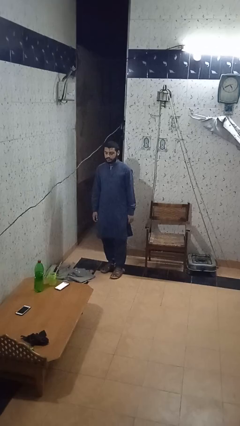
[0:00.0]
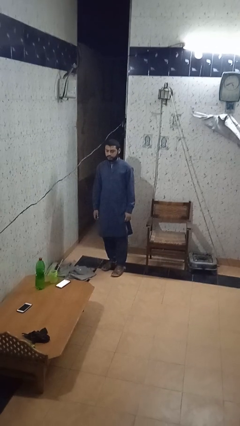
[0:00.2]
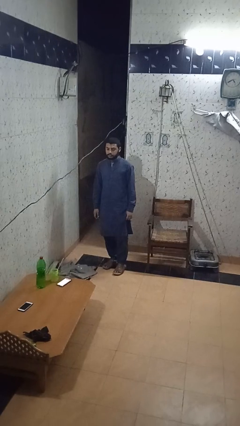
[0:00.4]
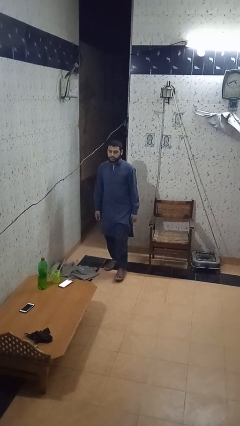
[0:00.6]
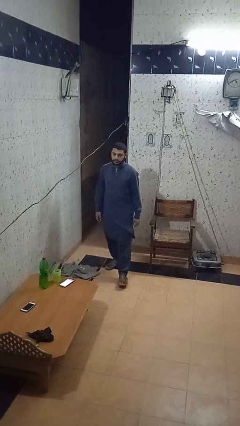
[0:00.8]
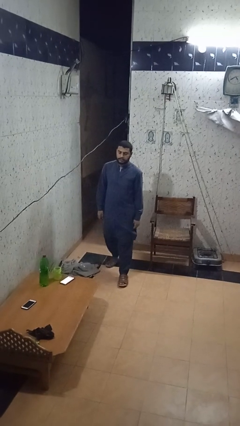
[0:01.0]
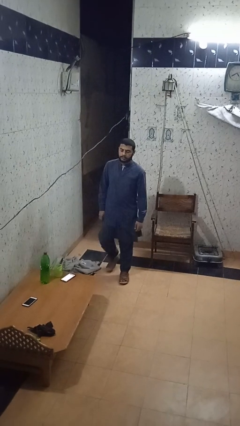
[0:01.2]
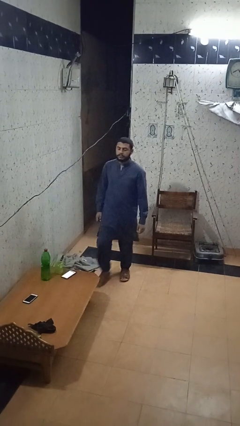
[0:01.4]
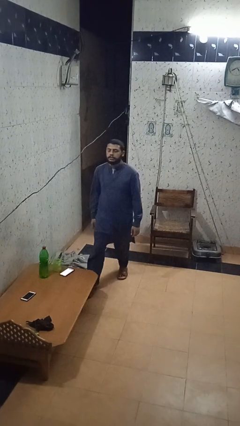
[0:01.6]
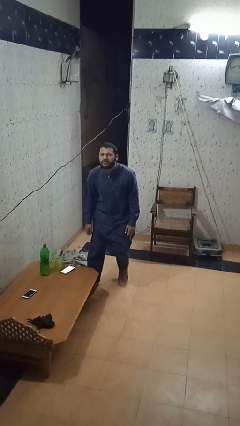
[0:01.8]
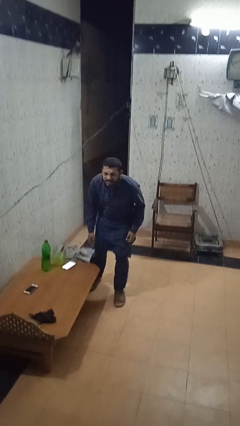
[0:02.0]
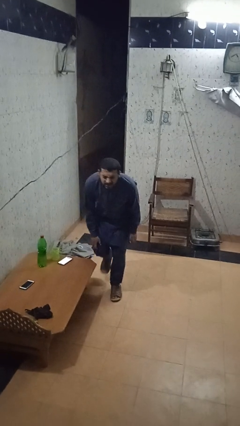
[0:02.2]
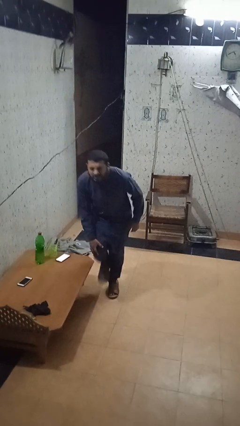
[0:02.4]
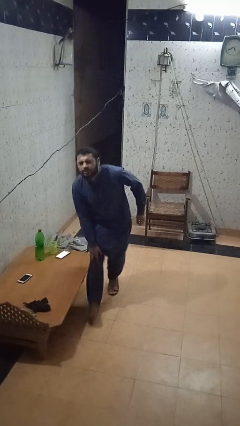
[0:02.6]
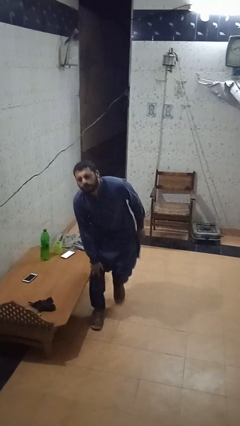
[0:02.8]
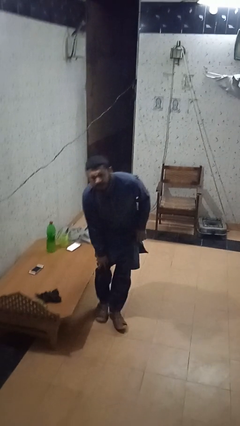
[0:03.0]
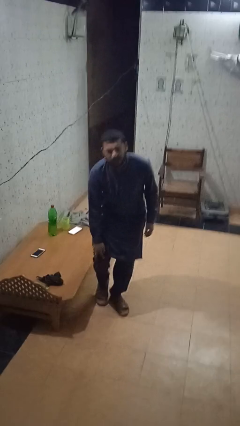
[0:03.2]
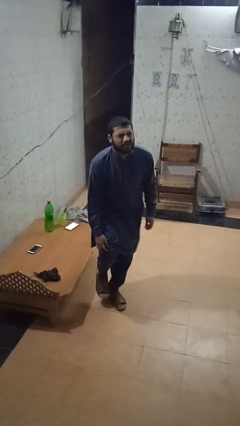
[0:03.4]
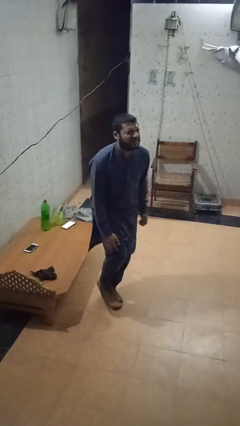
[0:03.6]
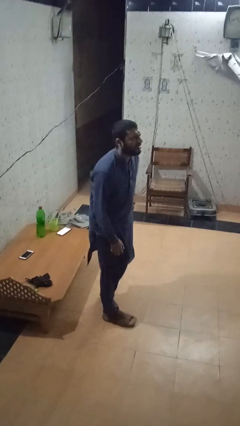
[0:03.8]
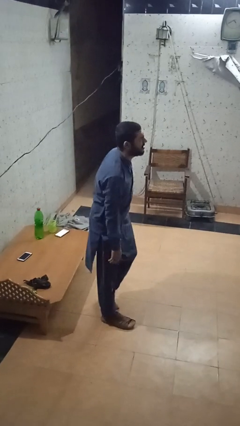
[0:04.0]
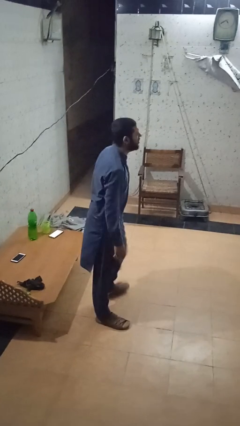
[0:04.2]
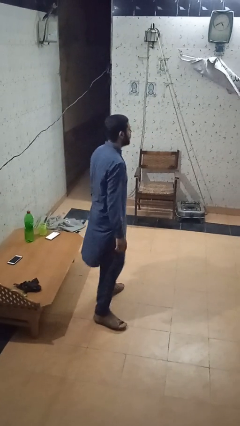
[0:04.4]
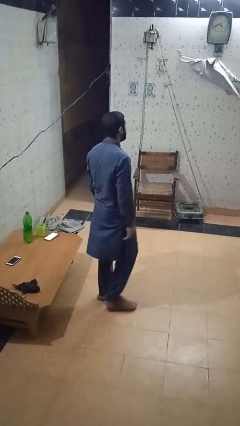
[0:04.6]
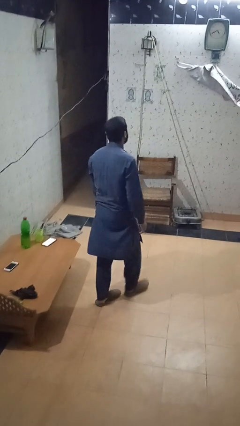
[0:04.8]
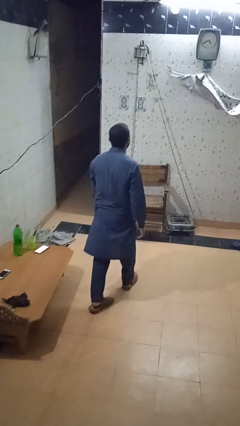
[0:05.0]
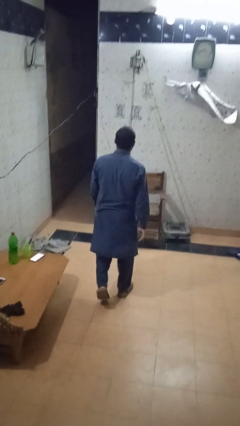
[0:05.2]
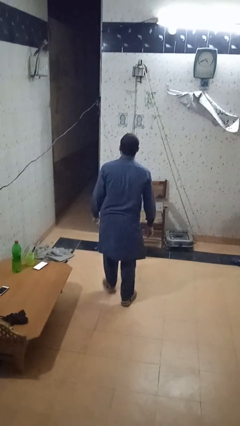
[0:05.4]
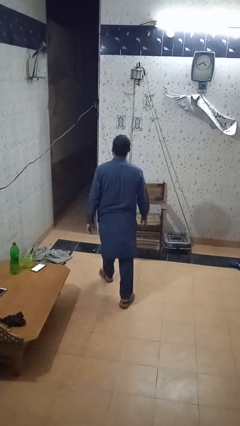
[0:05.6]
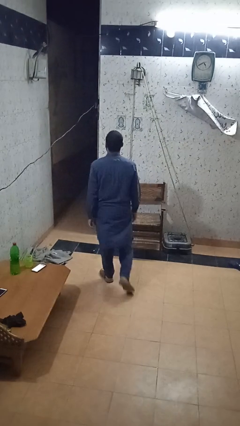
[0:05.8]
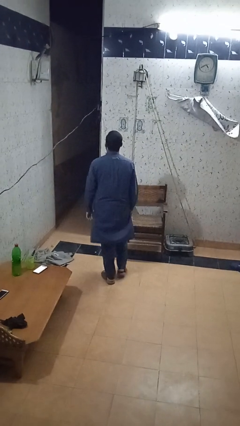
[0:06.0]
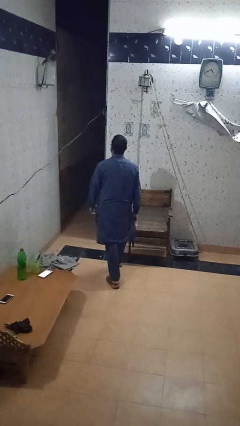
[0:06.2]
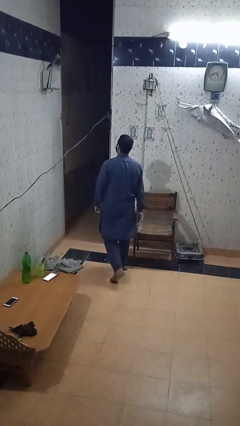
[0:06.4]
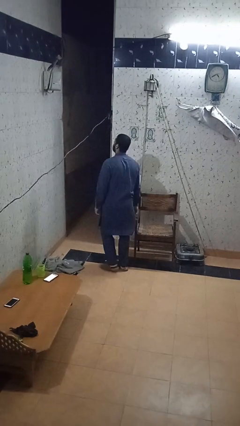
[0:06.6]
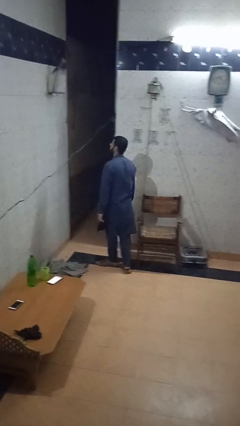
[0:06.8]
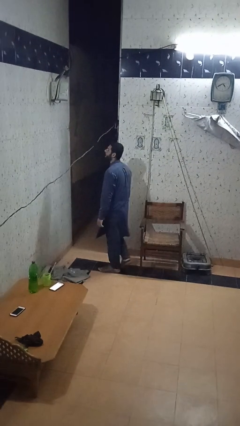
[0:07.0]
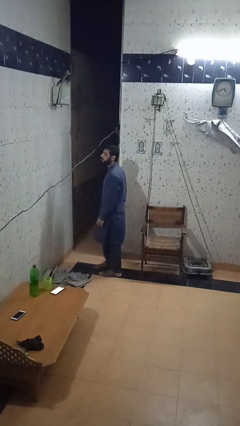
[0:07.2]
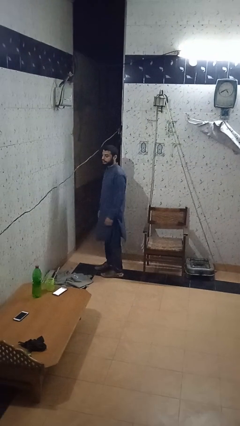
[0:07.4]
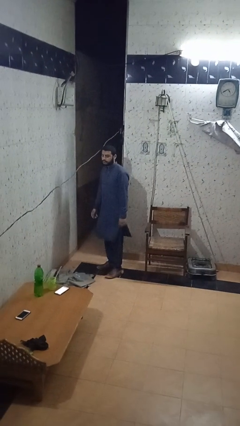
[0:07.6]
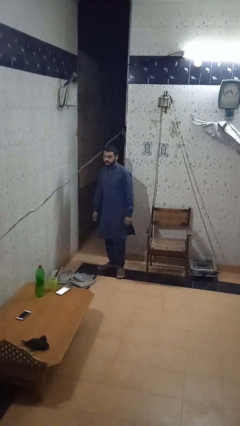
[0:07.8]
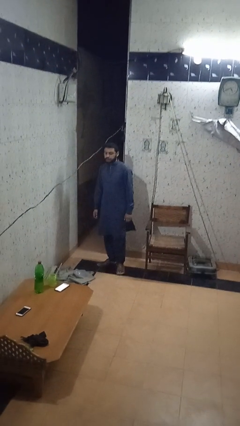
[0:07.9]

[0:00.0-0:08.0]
person bumps into table

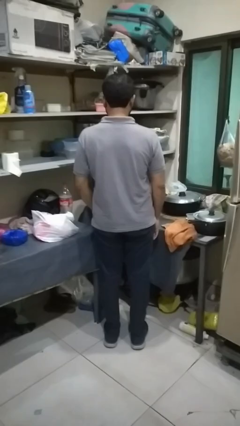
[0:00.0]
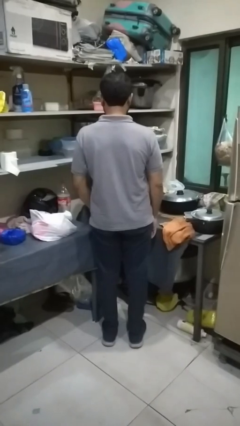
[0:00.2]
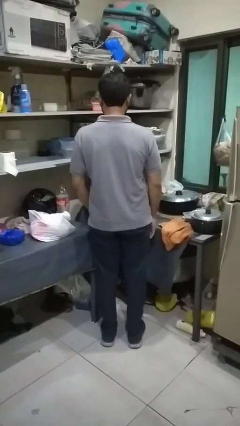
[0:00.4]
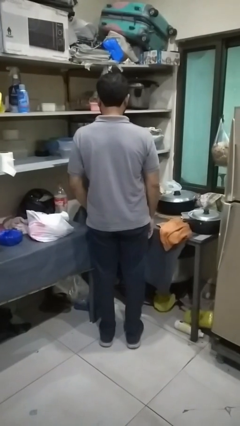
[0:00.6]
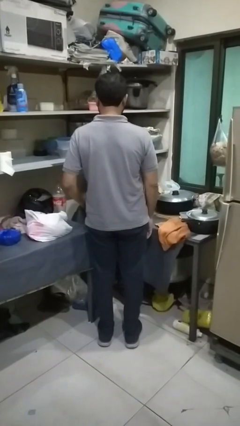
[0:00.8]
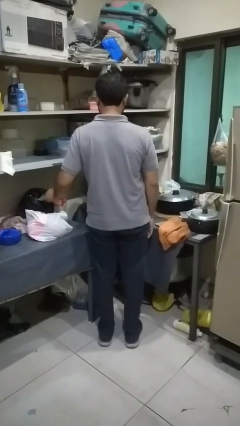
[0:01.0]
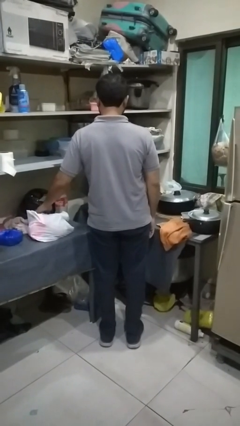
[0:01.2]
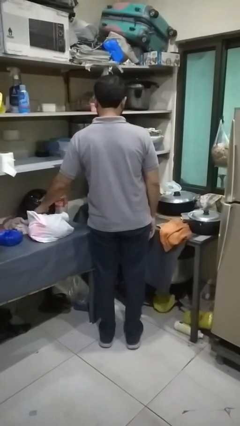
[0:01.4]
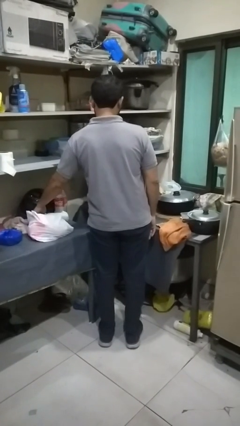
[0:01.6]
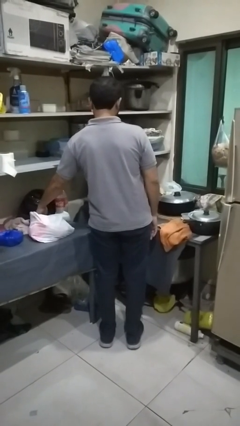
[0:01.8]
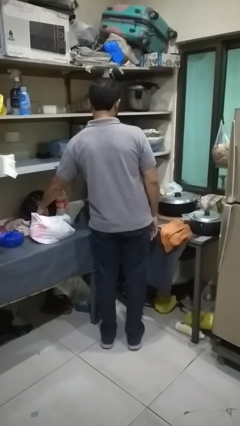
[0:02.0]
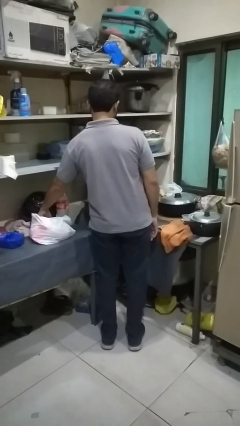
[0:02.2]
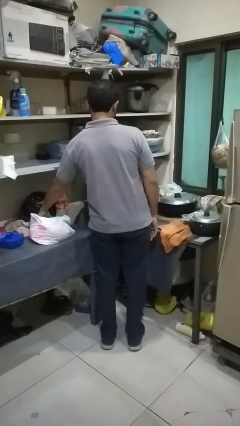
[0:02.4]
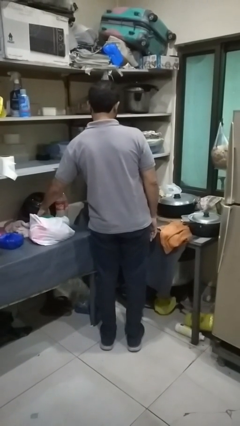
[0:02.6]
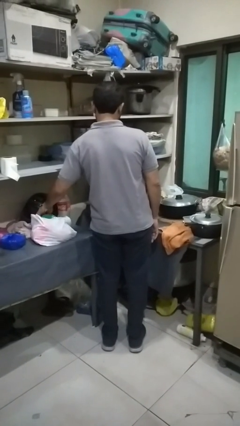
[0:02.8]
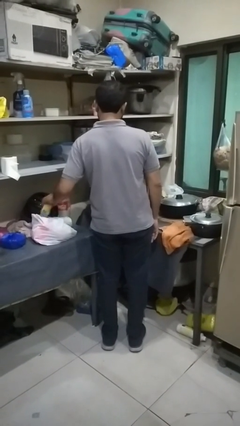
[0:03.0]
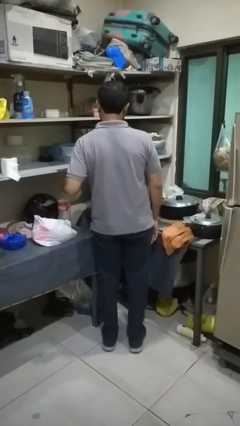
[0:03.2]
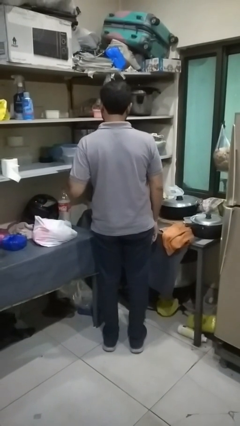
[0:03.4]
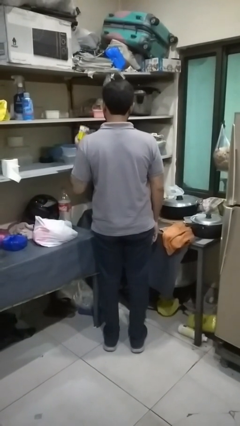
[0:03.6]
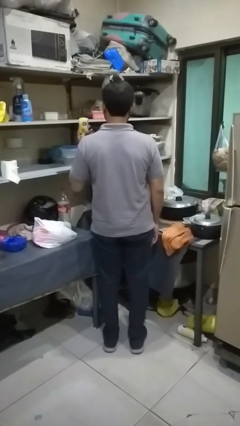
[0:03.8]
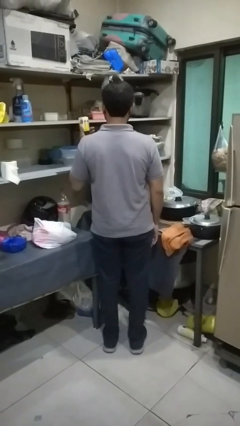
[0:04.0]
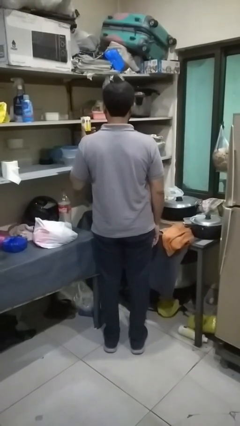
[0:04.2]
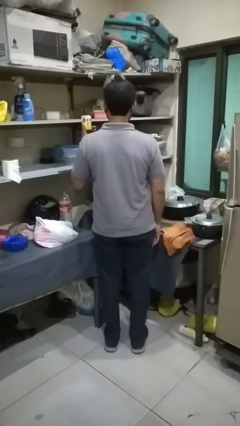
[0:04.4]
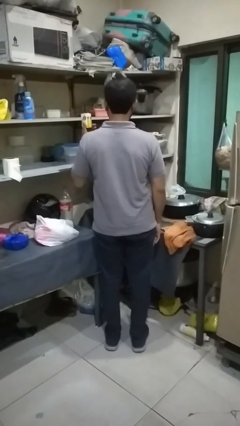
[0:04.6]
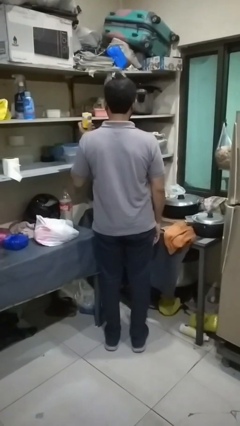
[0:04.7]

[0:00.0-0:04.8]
person takes object from bag

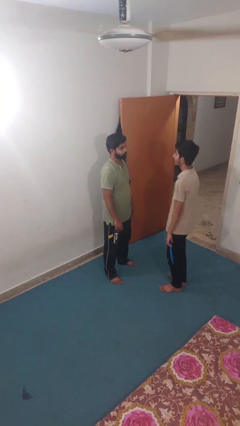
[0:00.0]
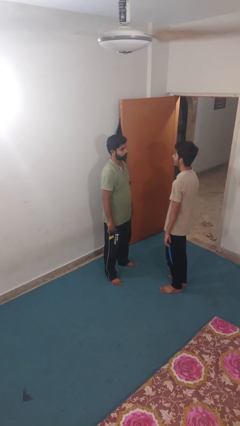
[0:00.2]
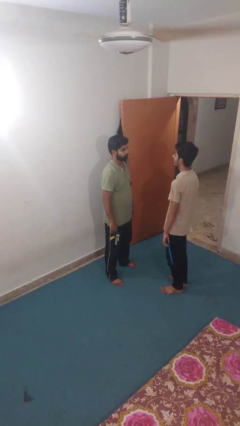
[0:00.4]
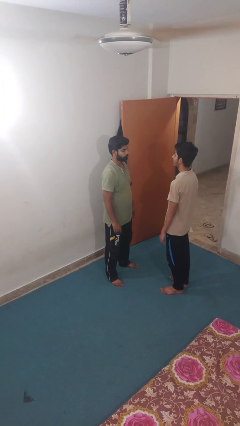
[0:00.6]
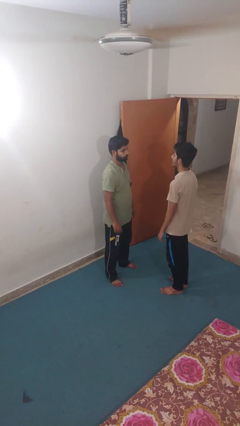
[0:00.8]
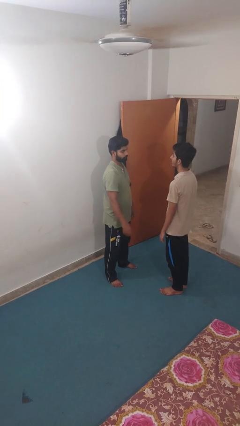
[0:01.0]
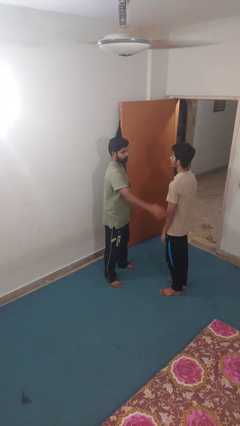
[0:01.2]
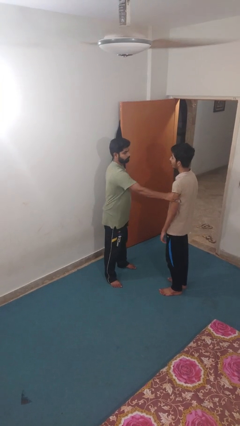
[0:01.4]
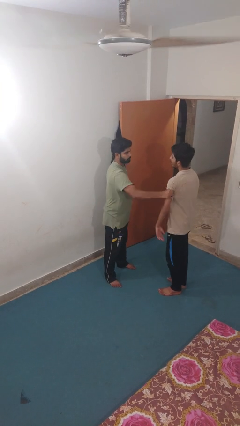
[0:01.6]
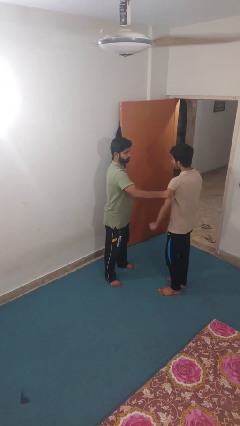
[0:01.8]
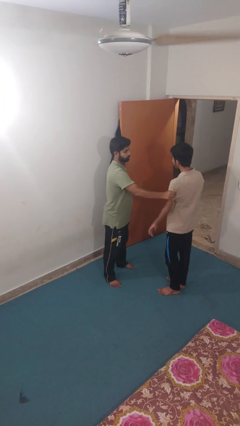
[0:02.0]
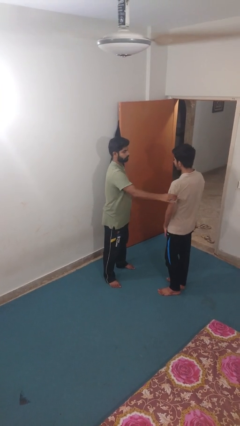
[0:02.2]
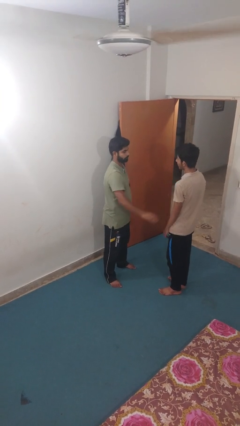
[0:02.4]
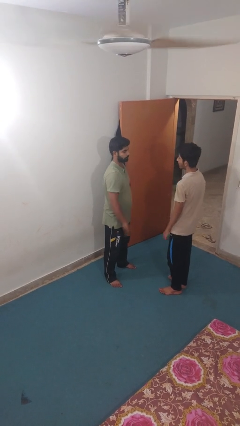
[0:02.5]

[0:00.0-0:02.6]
person grabs person by bicep

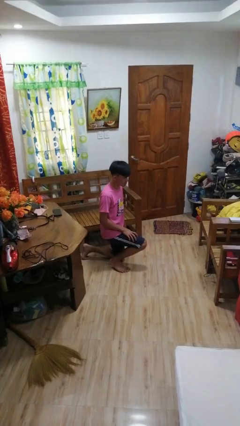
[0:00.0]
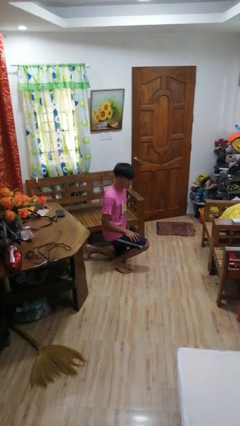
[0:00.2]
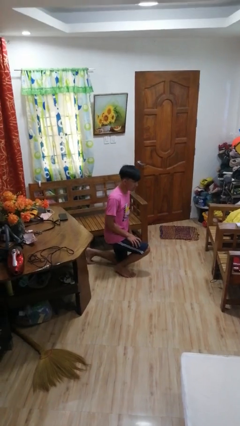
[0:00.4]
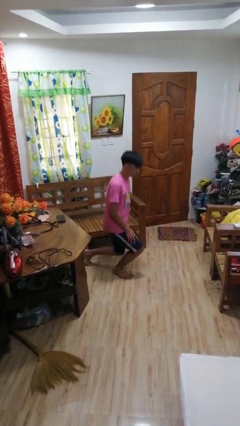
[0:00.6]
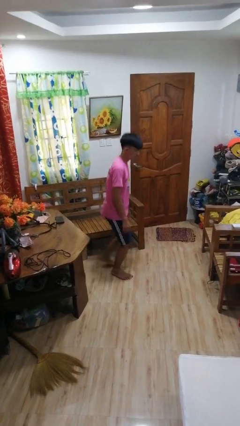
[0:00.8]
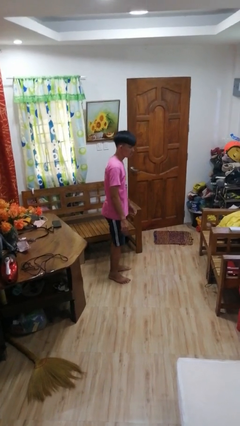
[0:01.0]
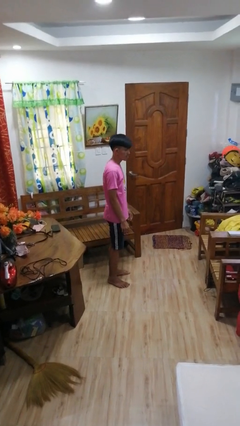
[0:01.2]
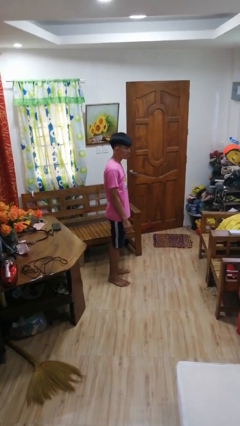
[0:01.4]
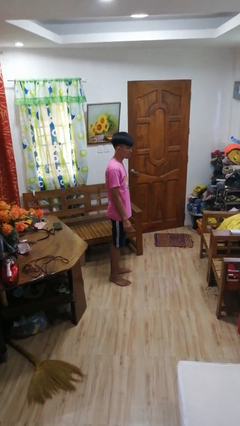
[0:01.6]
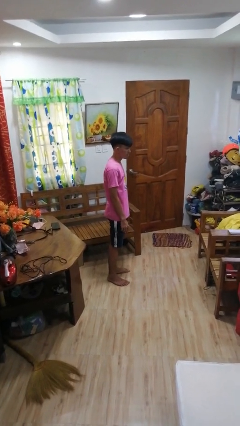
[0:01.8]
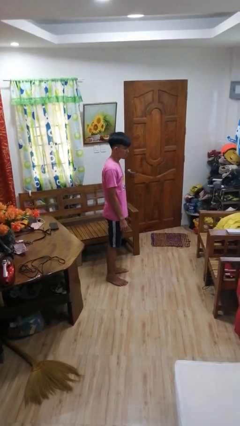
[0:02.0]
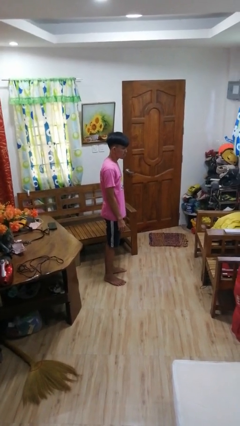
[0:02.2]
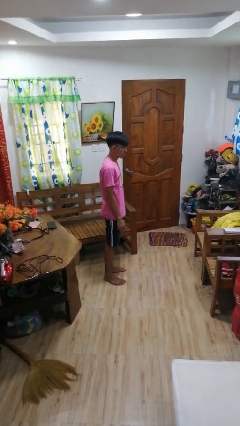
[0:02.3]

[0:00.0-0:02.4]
person stands up from floor
